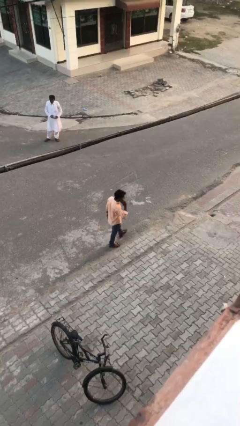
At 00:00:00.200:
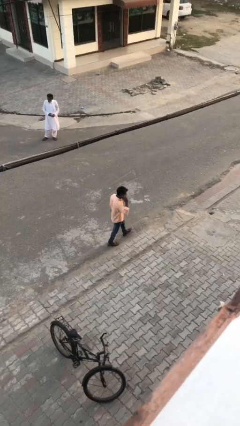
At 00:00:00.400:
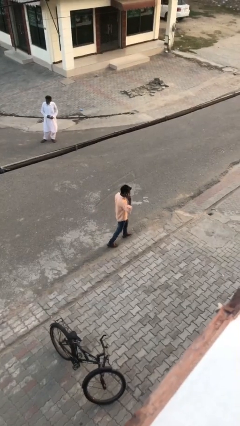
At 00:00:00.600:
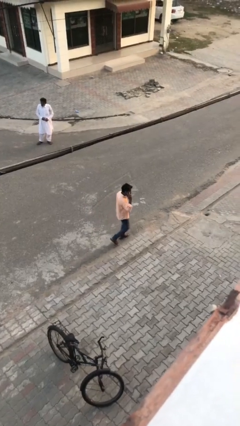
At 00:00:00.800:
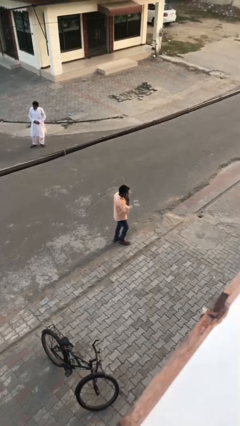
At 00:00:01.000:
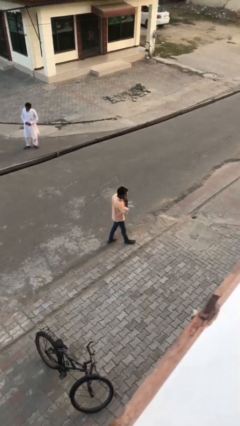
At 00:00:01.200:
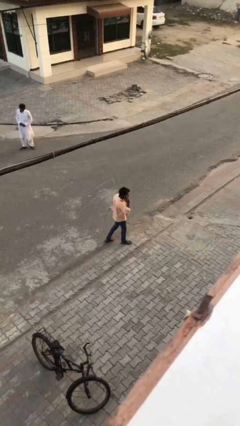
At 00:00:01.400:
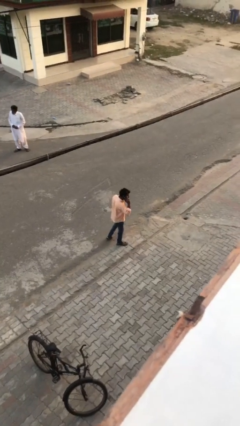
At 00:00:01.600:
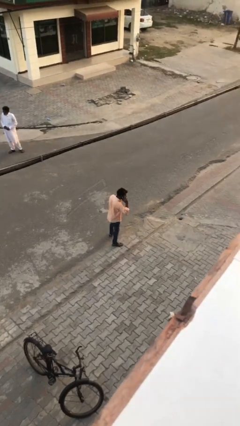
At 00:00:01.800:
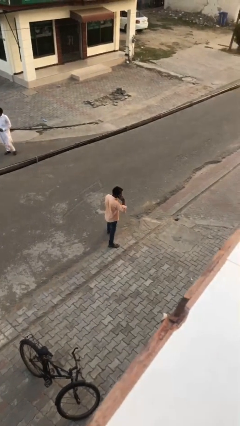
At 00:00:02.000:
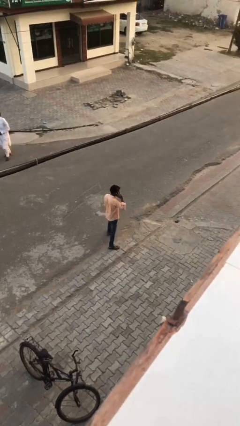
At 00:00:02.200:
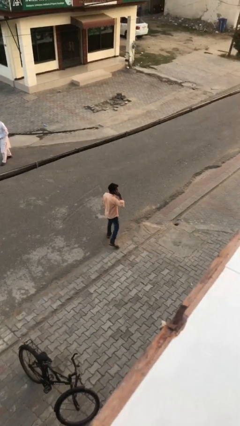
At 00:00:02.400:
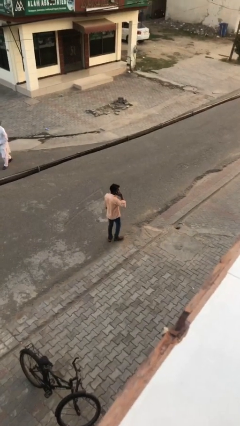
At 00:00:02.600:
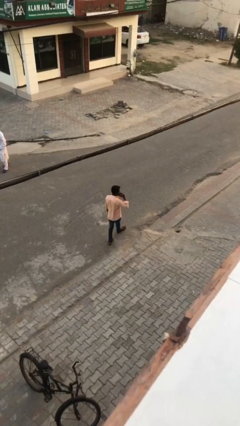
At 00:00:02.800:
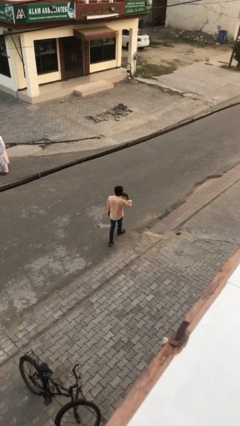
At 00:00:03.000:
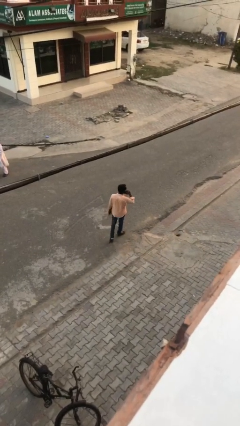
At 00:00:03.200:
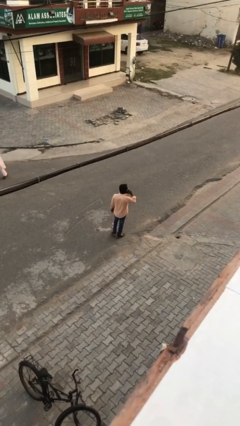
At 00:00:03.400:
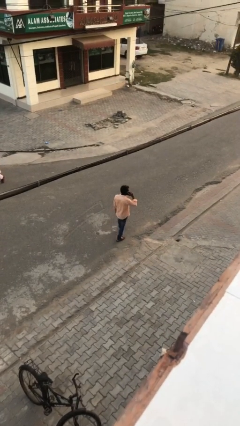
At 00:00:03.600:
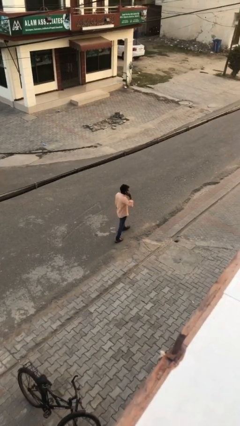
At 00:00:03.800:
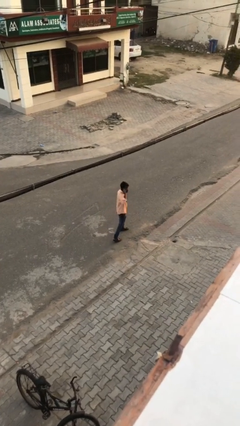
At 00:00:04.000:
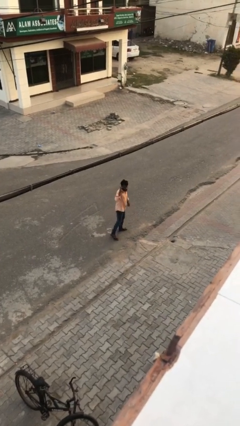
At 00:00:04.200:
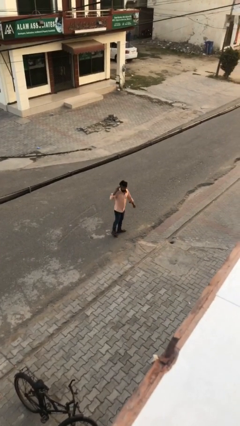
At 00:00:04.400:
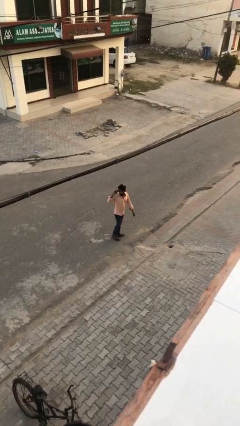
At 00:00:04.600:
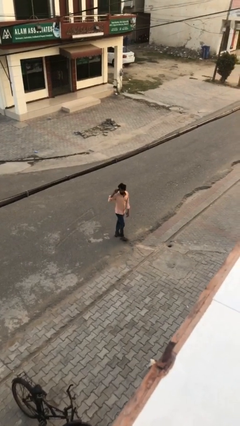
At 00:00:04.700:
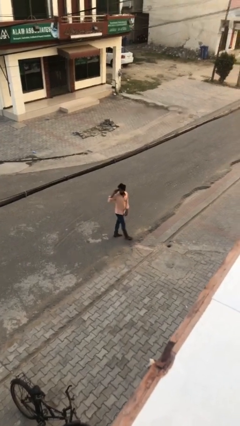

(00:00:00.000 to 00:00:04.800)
person talks on phone

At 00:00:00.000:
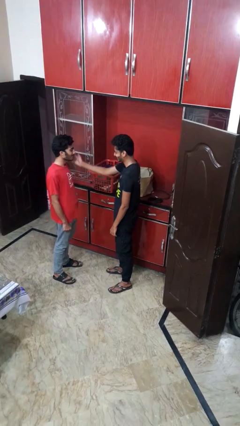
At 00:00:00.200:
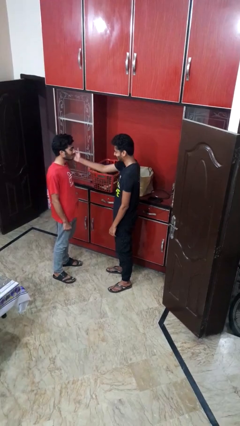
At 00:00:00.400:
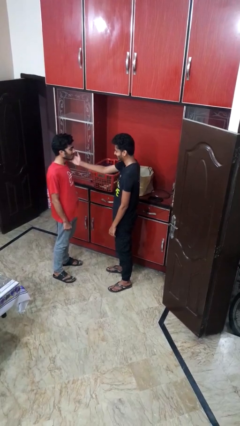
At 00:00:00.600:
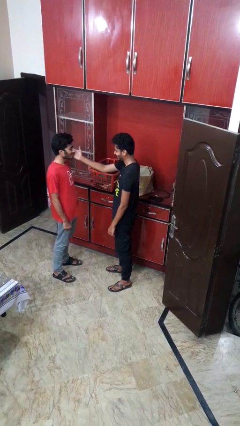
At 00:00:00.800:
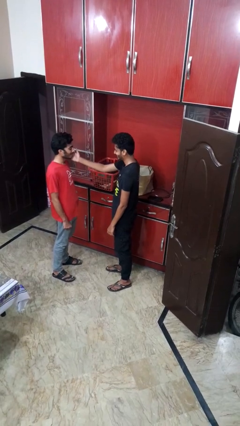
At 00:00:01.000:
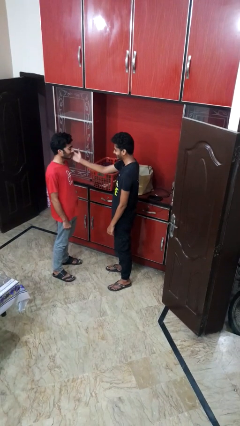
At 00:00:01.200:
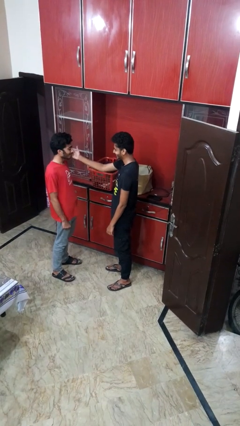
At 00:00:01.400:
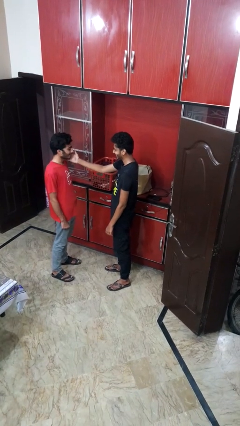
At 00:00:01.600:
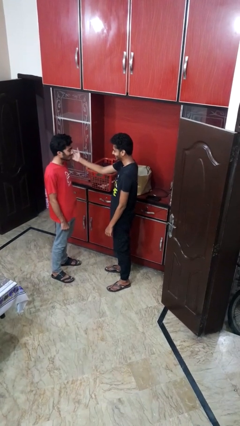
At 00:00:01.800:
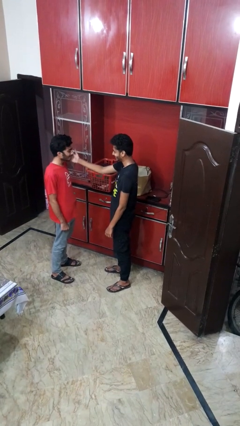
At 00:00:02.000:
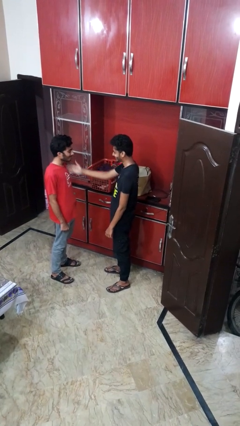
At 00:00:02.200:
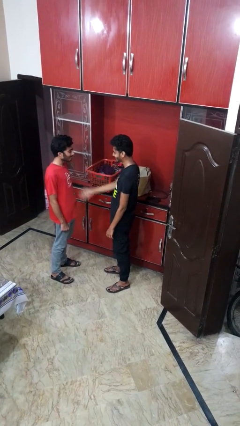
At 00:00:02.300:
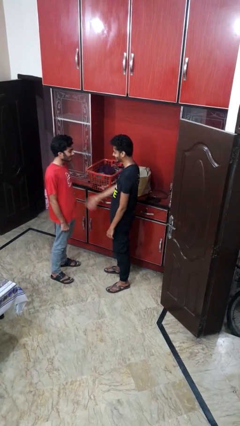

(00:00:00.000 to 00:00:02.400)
person touches face of person

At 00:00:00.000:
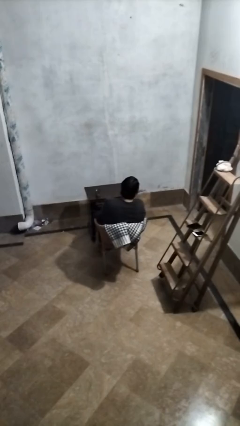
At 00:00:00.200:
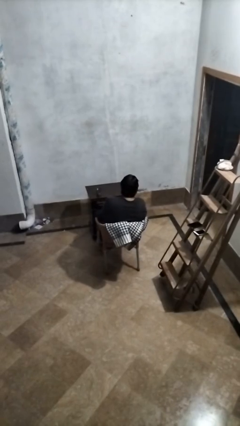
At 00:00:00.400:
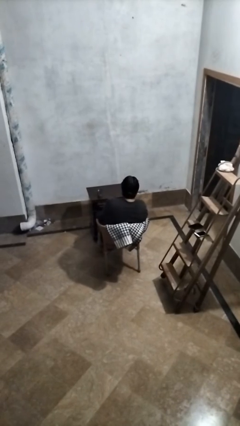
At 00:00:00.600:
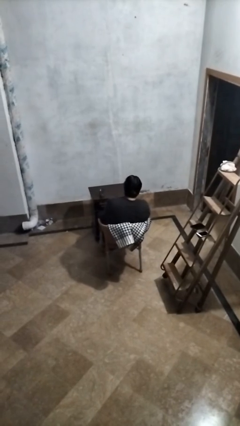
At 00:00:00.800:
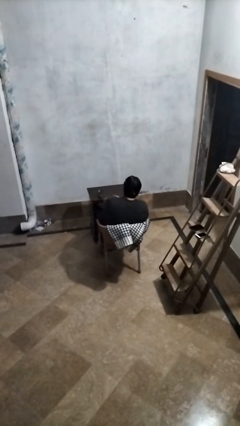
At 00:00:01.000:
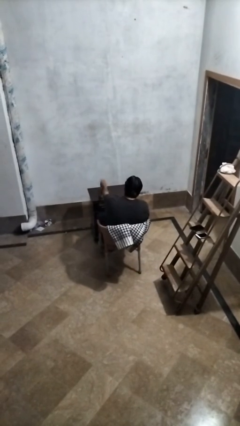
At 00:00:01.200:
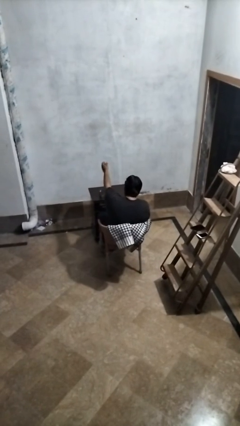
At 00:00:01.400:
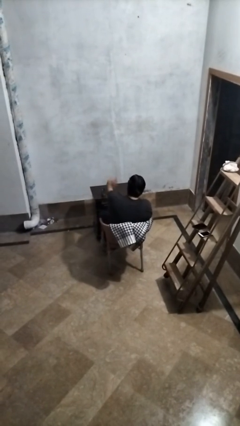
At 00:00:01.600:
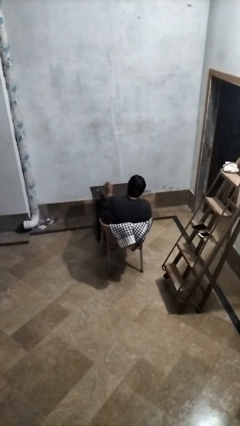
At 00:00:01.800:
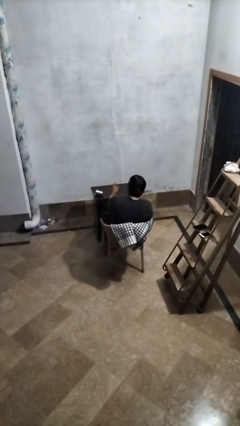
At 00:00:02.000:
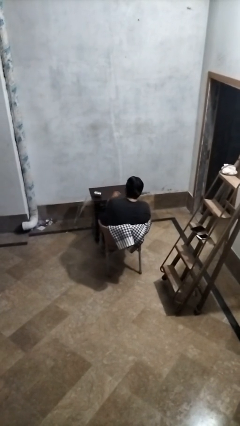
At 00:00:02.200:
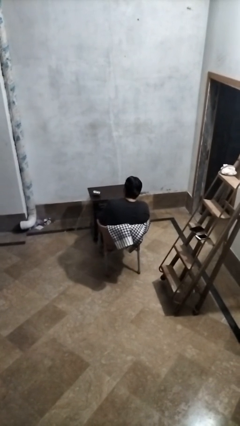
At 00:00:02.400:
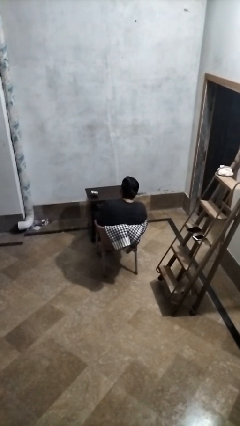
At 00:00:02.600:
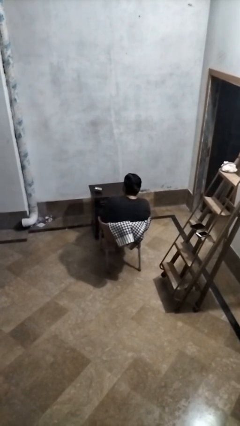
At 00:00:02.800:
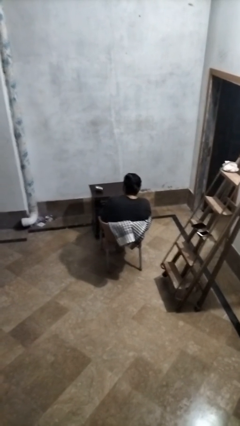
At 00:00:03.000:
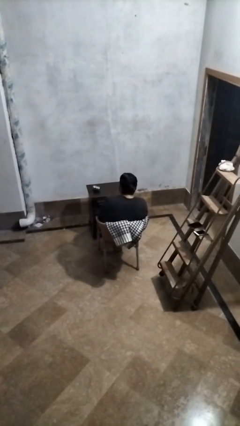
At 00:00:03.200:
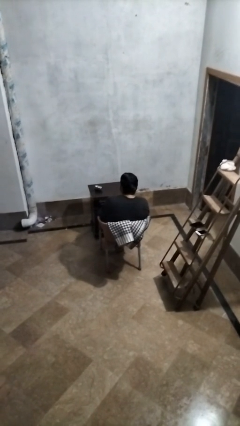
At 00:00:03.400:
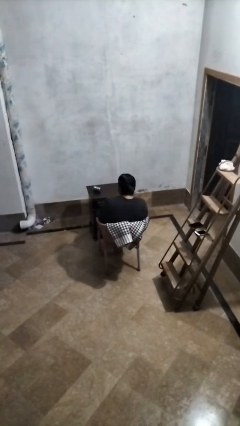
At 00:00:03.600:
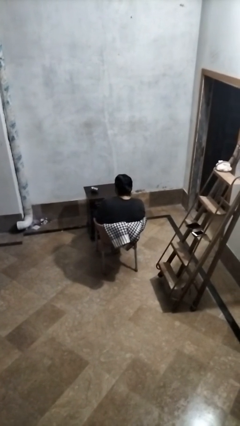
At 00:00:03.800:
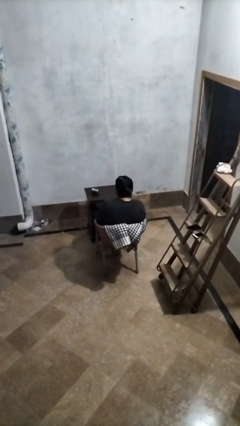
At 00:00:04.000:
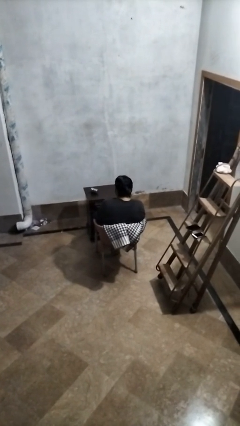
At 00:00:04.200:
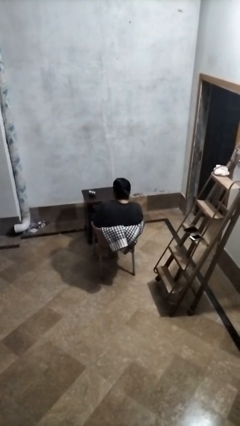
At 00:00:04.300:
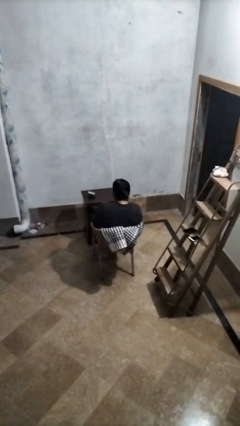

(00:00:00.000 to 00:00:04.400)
person spills on table

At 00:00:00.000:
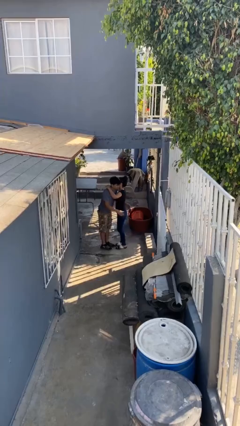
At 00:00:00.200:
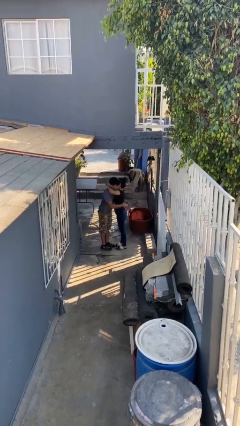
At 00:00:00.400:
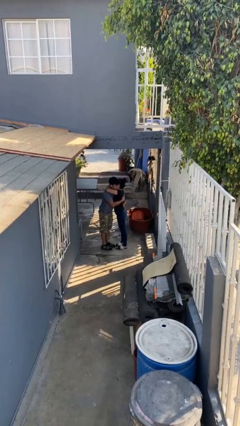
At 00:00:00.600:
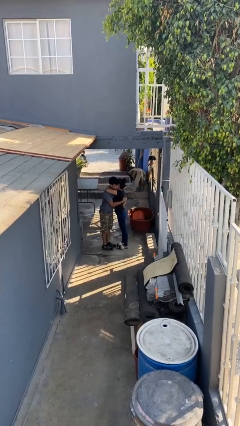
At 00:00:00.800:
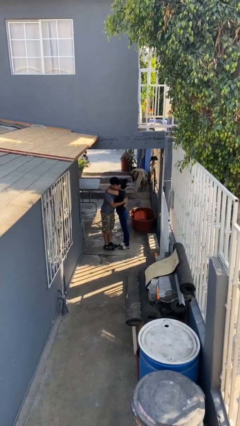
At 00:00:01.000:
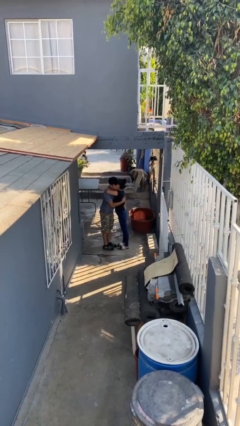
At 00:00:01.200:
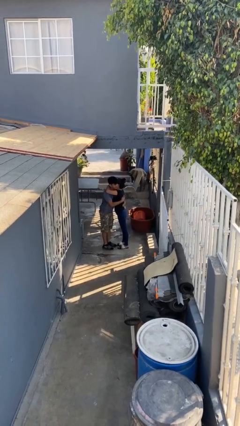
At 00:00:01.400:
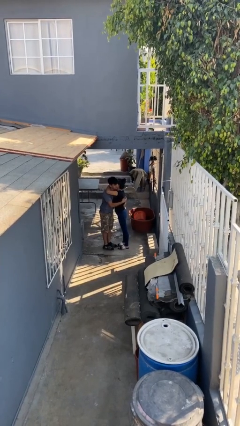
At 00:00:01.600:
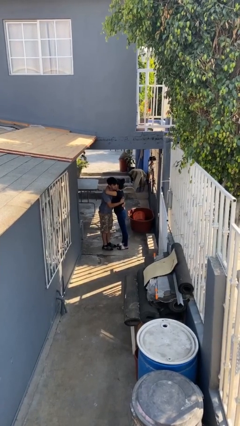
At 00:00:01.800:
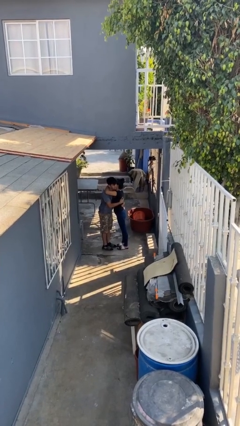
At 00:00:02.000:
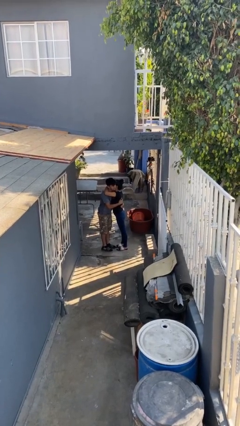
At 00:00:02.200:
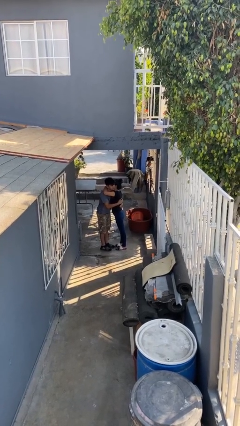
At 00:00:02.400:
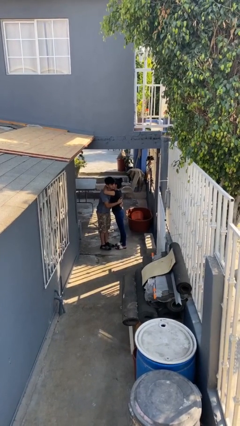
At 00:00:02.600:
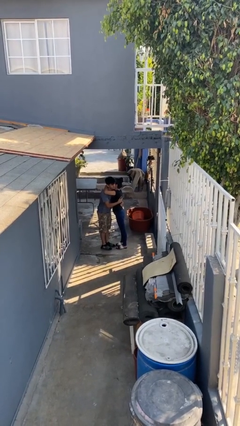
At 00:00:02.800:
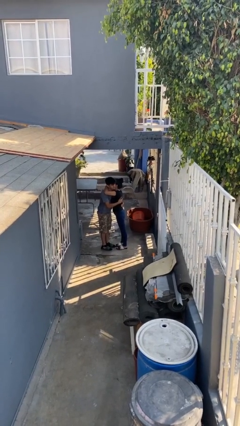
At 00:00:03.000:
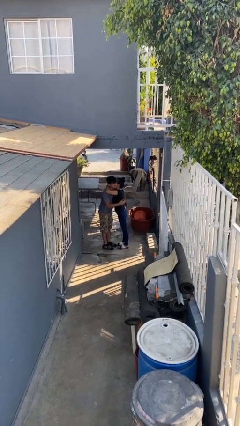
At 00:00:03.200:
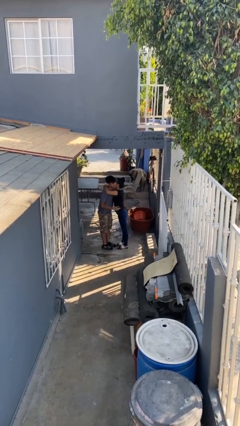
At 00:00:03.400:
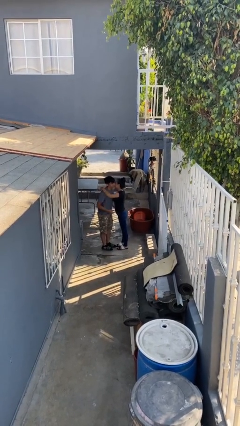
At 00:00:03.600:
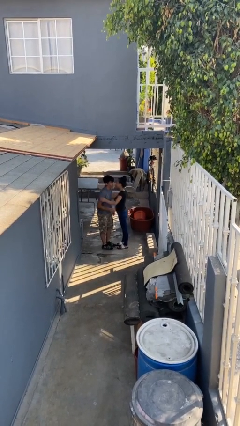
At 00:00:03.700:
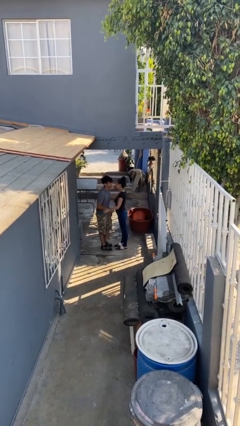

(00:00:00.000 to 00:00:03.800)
person embraces person

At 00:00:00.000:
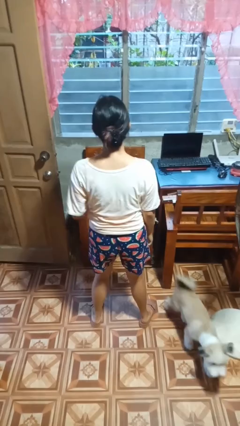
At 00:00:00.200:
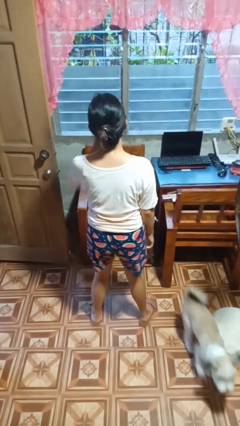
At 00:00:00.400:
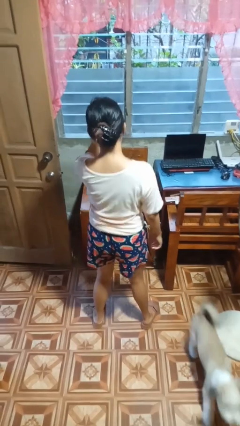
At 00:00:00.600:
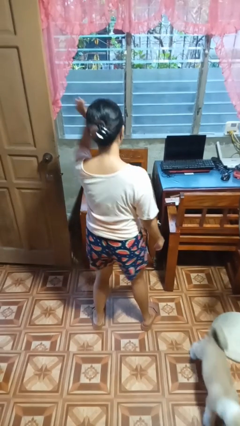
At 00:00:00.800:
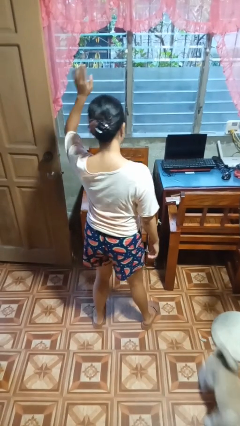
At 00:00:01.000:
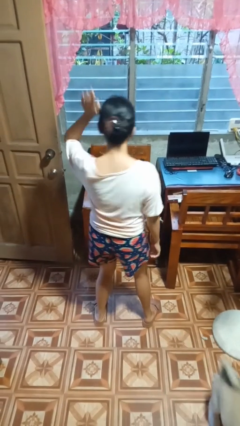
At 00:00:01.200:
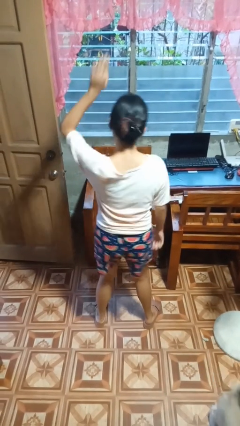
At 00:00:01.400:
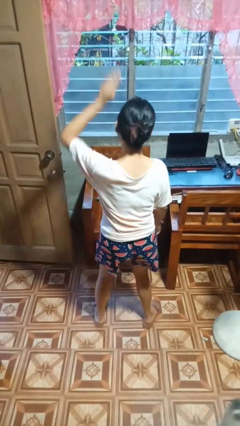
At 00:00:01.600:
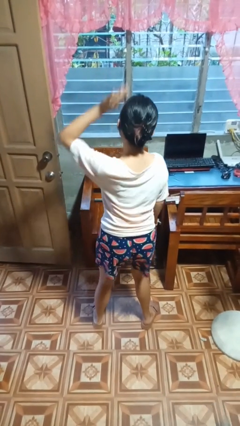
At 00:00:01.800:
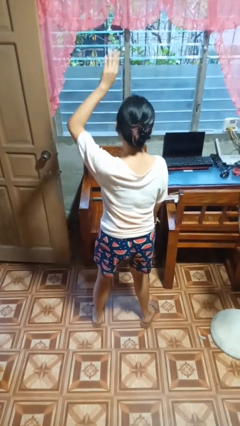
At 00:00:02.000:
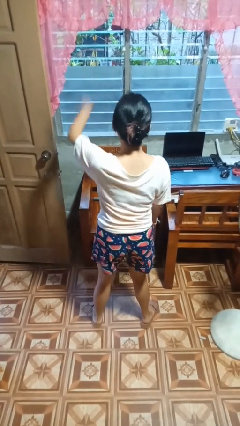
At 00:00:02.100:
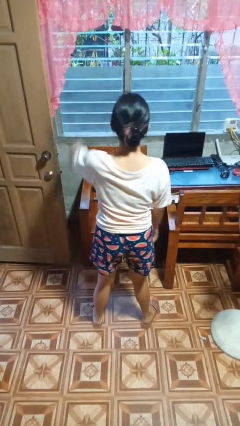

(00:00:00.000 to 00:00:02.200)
person dances in place
